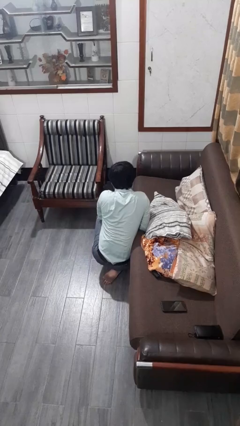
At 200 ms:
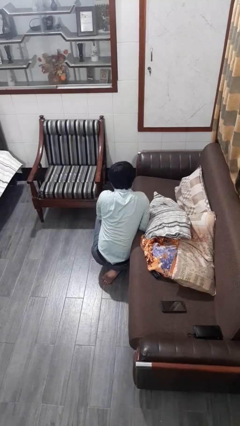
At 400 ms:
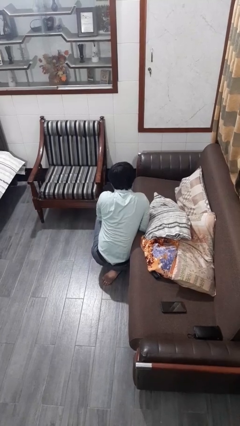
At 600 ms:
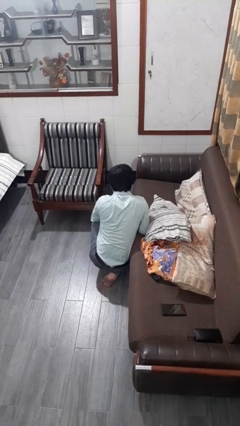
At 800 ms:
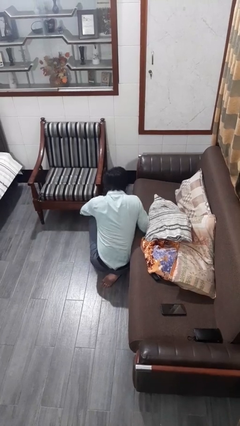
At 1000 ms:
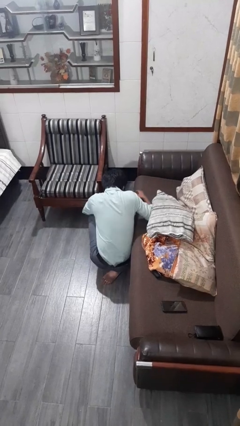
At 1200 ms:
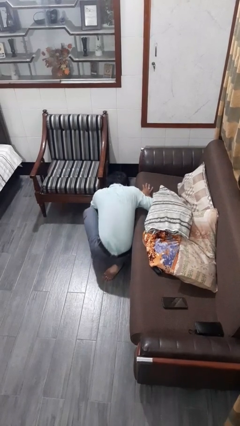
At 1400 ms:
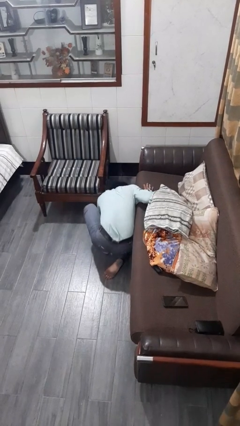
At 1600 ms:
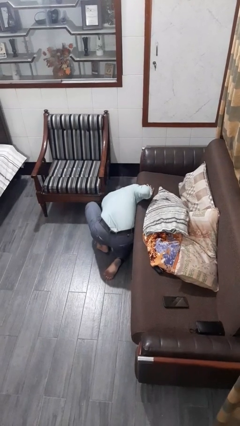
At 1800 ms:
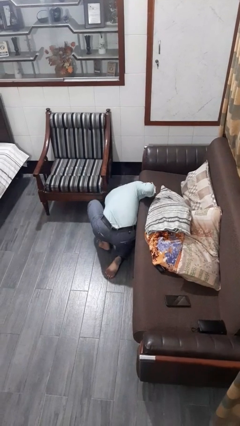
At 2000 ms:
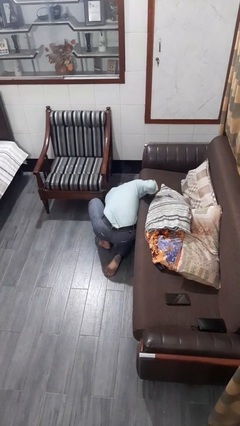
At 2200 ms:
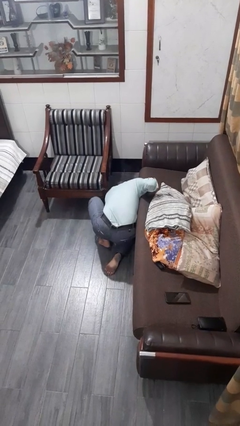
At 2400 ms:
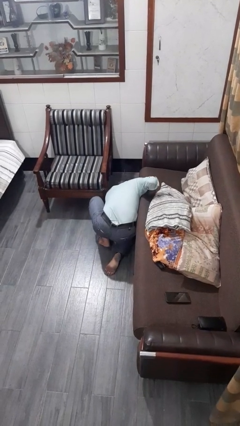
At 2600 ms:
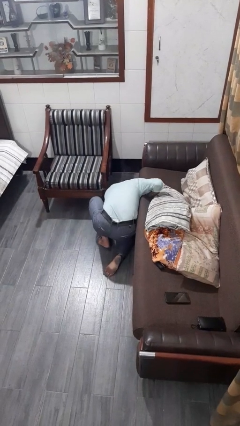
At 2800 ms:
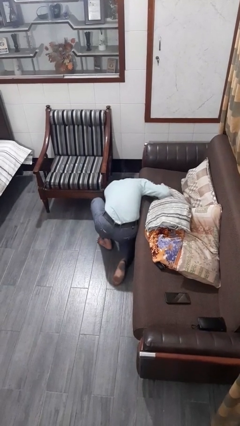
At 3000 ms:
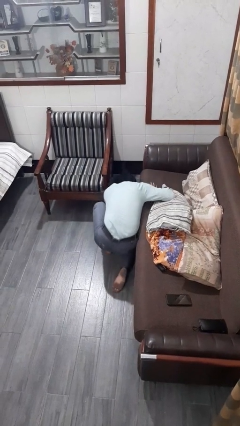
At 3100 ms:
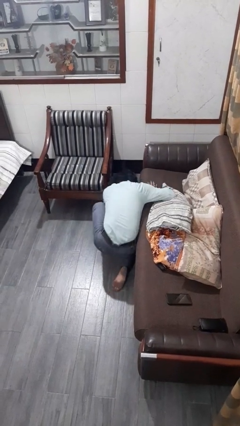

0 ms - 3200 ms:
person searches under couch

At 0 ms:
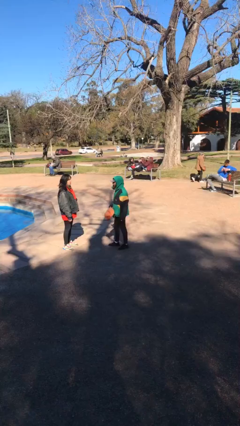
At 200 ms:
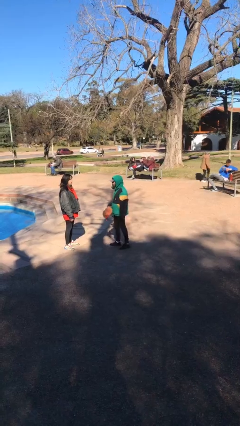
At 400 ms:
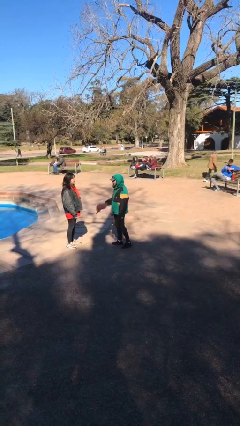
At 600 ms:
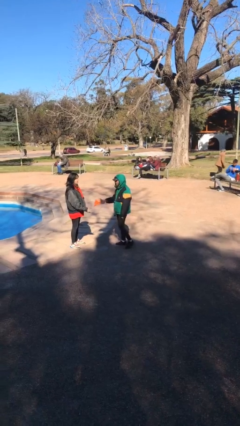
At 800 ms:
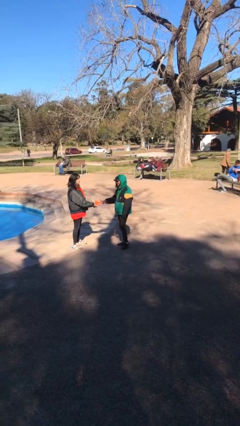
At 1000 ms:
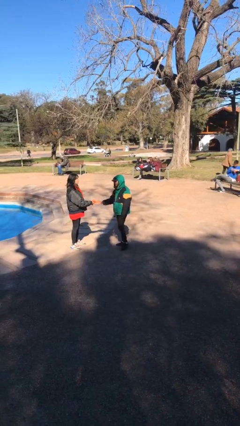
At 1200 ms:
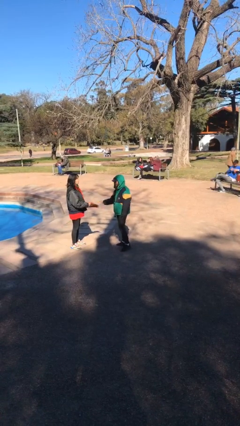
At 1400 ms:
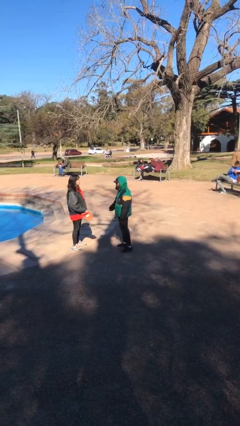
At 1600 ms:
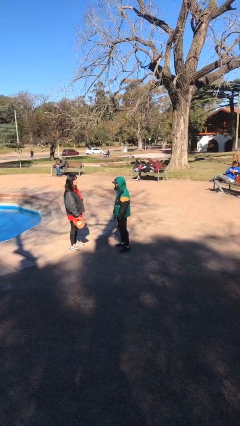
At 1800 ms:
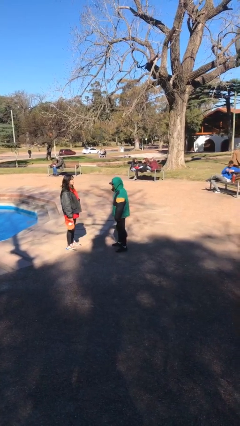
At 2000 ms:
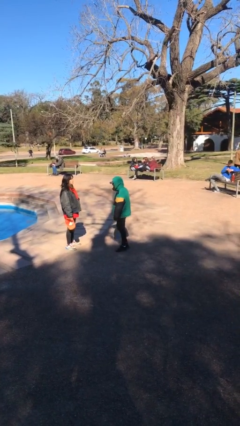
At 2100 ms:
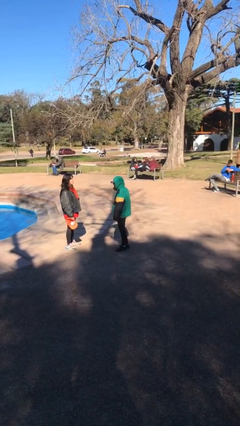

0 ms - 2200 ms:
person transfers object to person

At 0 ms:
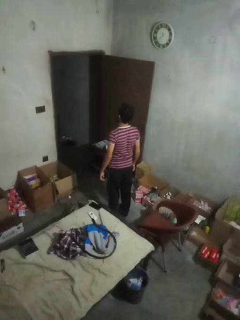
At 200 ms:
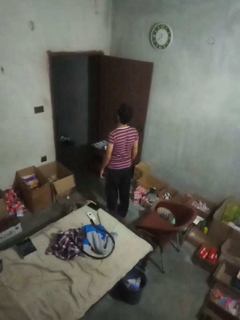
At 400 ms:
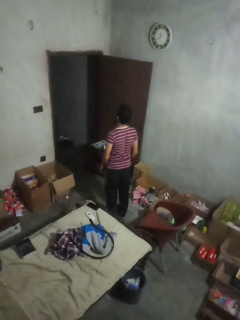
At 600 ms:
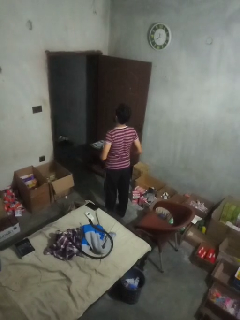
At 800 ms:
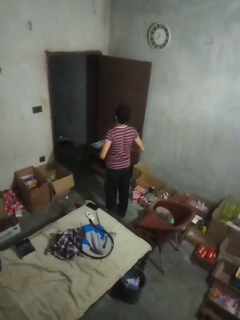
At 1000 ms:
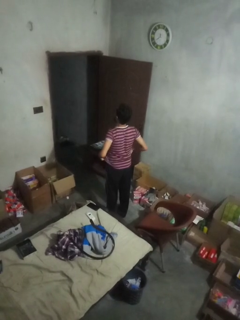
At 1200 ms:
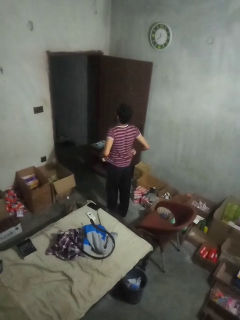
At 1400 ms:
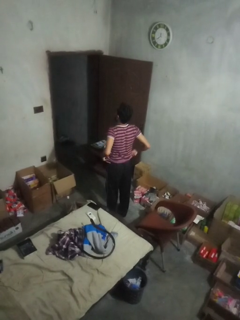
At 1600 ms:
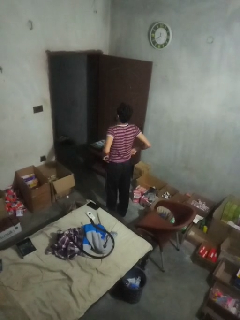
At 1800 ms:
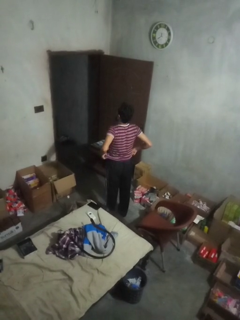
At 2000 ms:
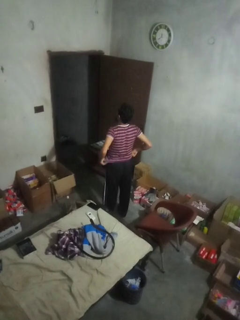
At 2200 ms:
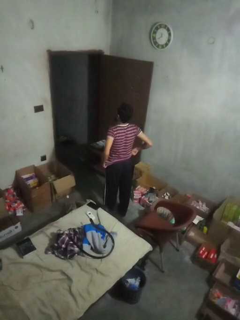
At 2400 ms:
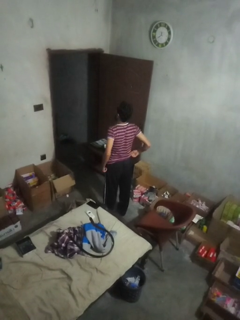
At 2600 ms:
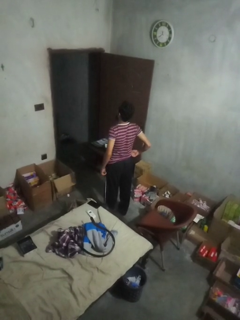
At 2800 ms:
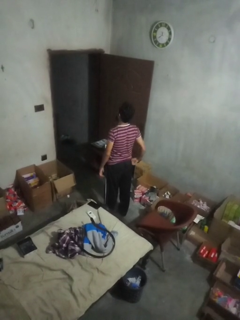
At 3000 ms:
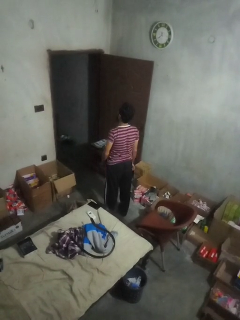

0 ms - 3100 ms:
person hikes up pants

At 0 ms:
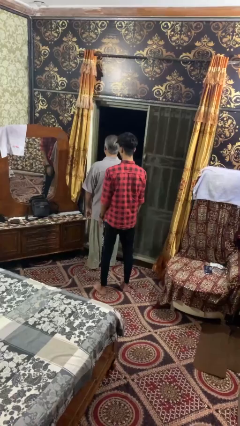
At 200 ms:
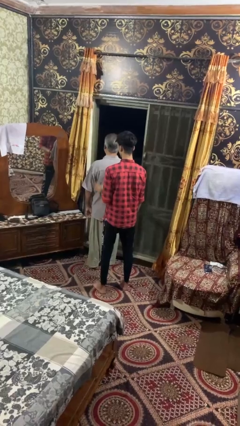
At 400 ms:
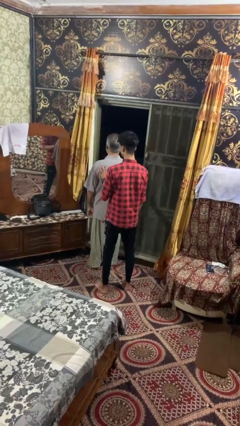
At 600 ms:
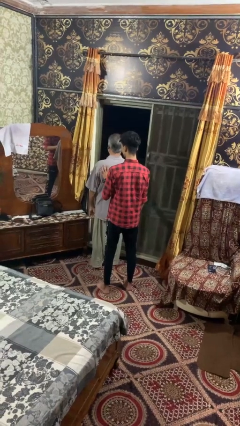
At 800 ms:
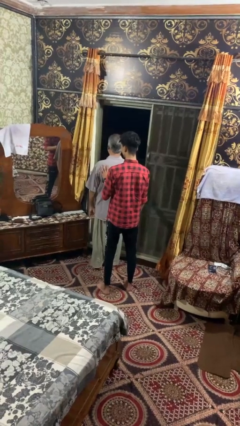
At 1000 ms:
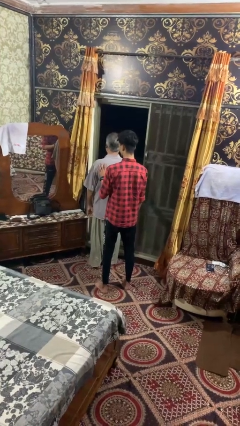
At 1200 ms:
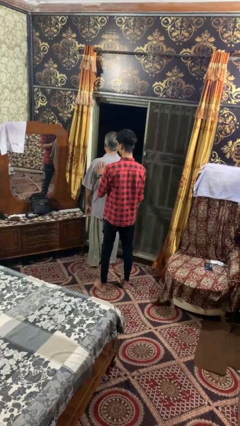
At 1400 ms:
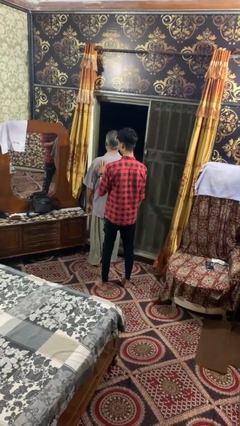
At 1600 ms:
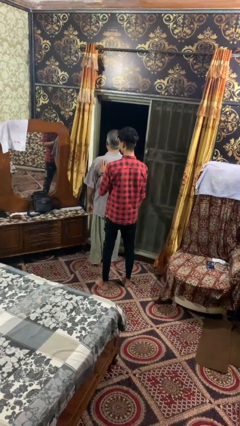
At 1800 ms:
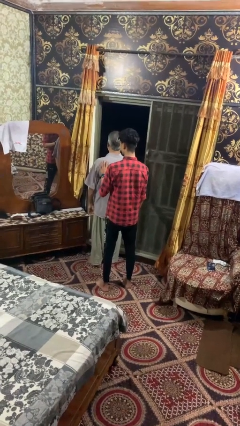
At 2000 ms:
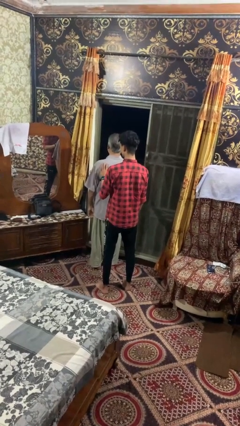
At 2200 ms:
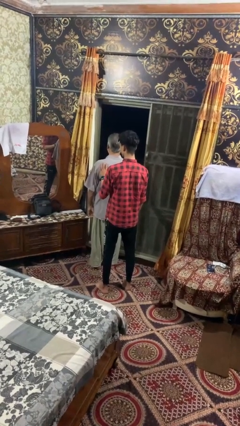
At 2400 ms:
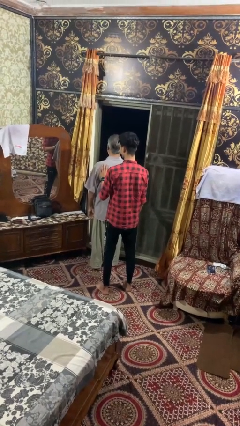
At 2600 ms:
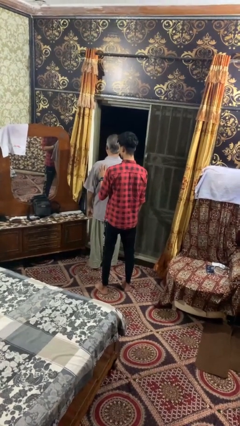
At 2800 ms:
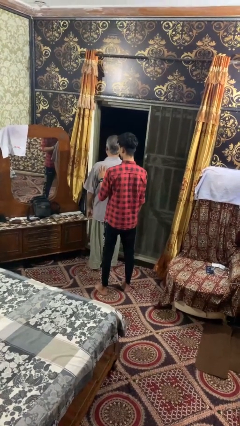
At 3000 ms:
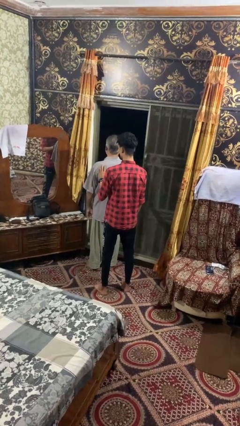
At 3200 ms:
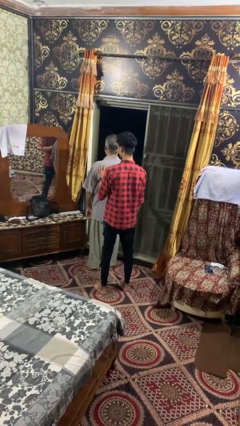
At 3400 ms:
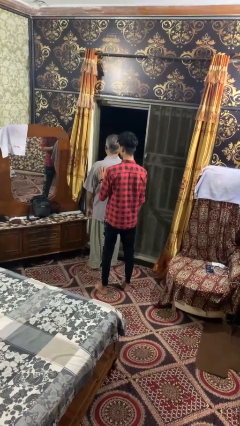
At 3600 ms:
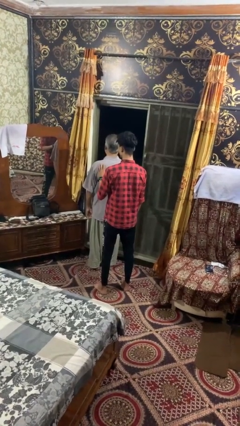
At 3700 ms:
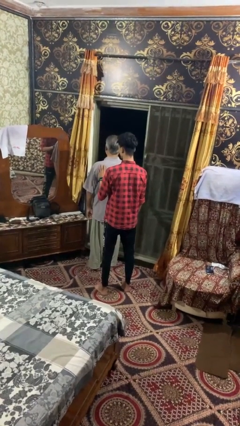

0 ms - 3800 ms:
person touches back of person

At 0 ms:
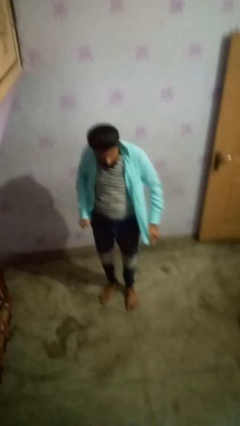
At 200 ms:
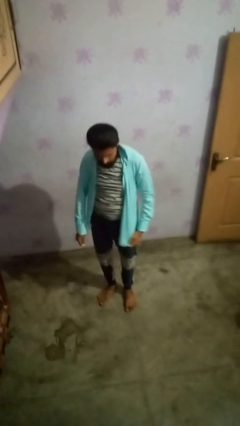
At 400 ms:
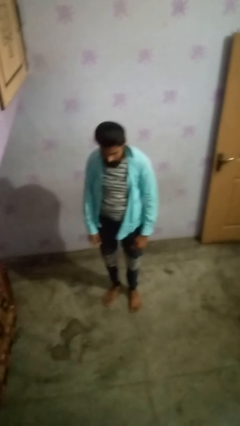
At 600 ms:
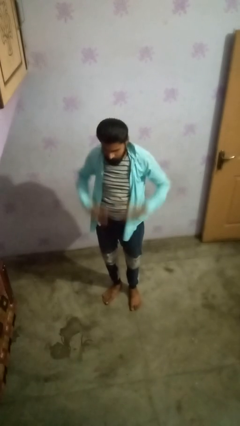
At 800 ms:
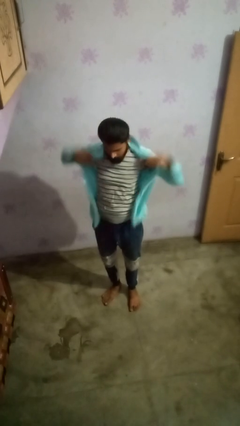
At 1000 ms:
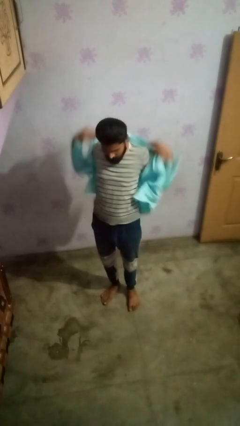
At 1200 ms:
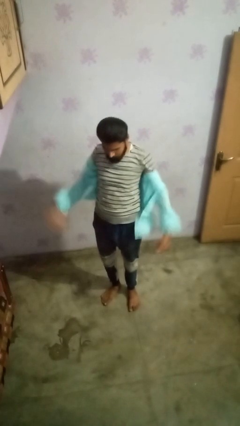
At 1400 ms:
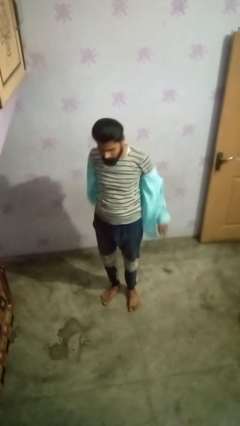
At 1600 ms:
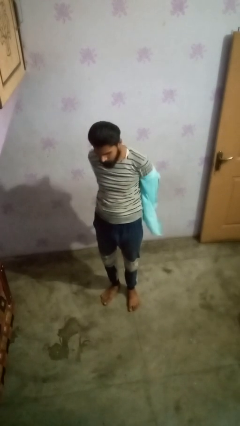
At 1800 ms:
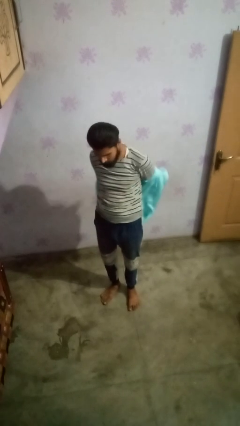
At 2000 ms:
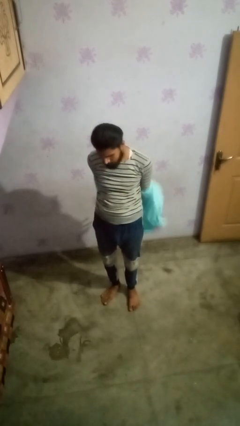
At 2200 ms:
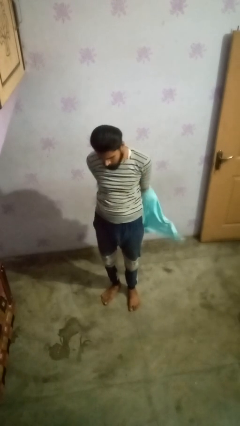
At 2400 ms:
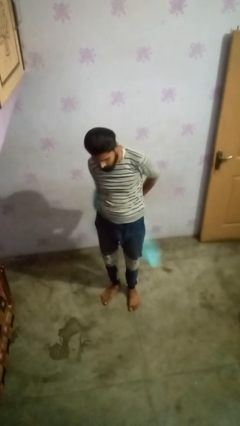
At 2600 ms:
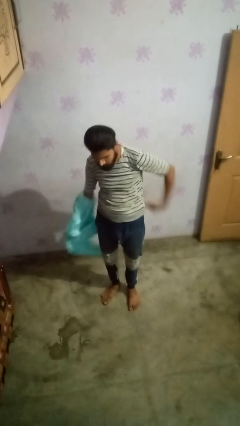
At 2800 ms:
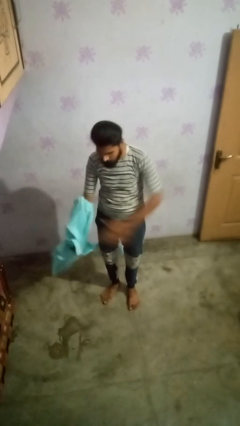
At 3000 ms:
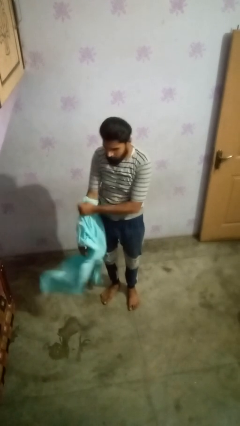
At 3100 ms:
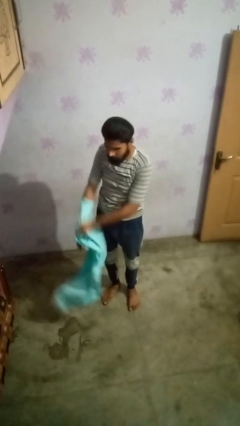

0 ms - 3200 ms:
person takes off shirt

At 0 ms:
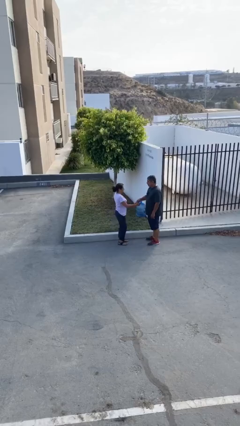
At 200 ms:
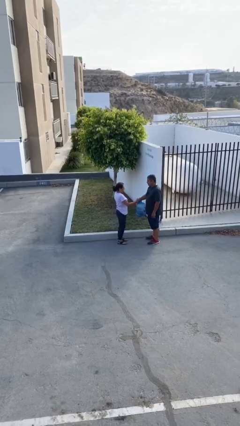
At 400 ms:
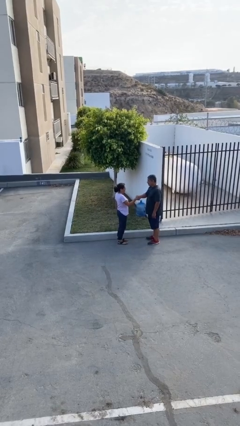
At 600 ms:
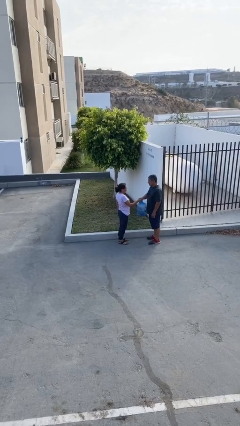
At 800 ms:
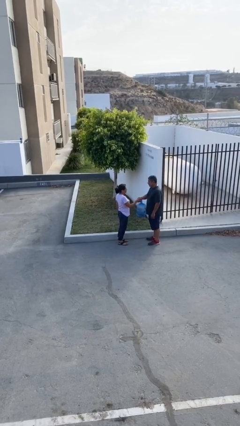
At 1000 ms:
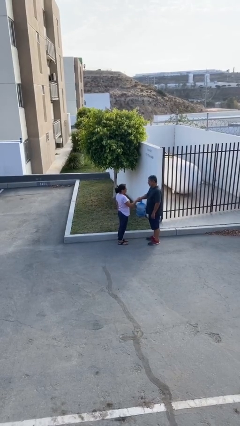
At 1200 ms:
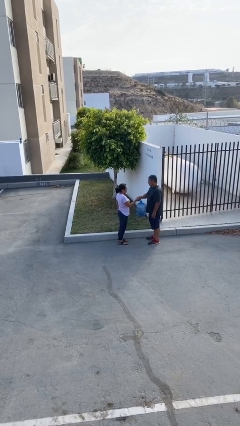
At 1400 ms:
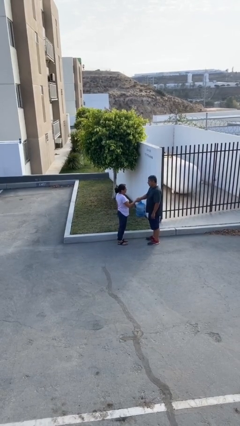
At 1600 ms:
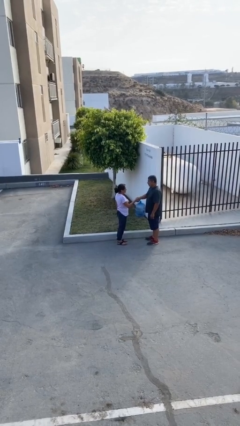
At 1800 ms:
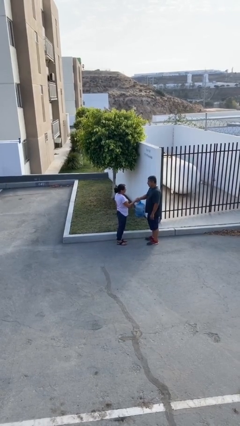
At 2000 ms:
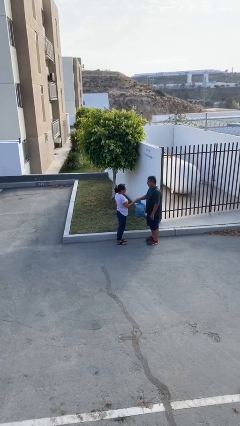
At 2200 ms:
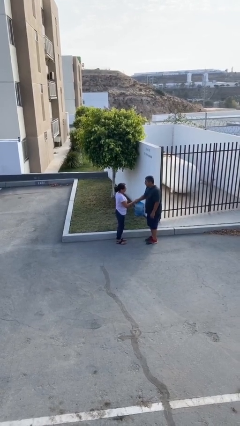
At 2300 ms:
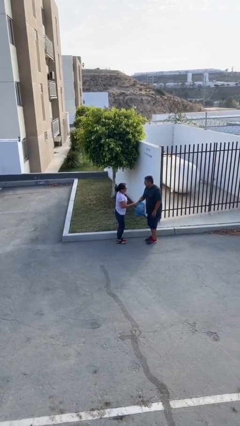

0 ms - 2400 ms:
person shakes hand

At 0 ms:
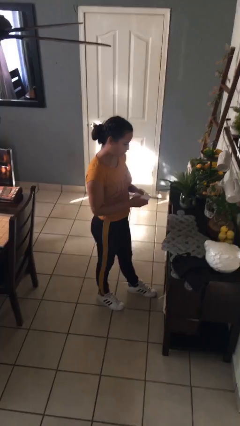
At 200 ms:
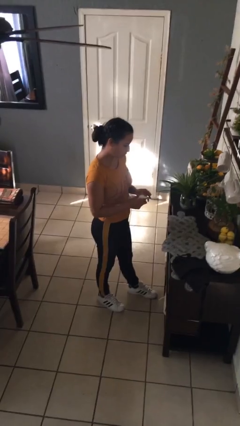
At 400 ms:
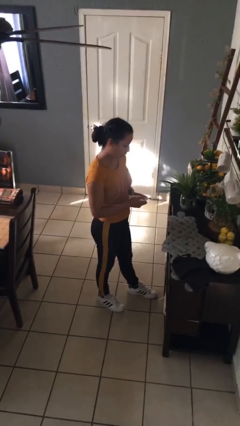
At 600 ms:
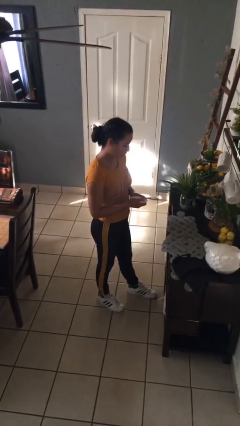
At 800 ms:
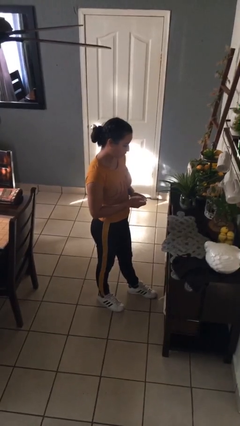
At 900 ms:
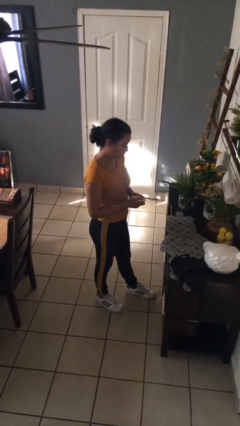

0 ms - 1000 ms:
person crumples paper
